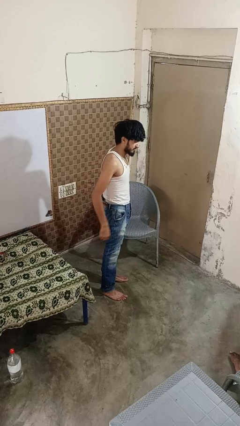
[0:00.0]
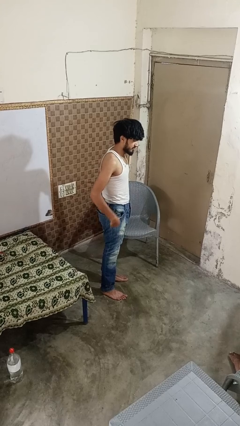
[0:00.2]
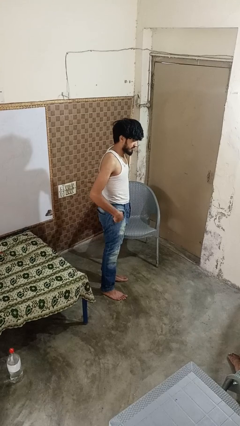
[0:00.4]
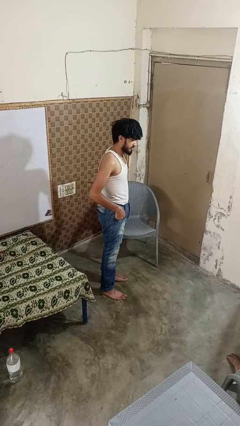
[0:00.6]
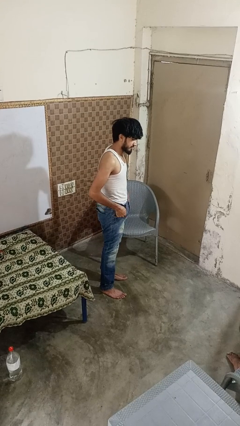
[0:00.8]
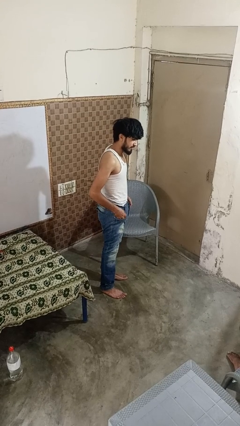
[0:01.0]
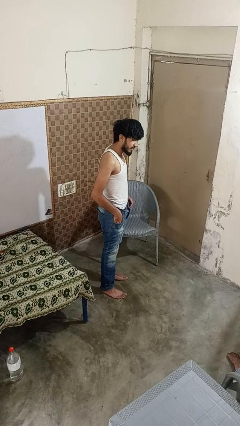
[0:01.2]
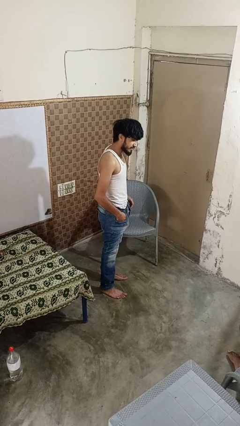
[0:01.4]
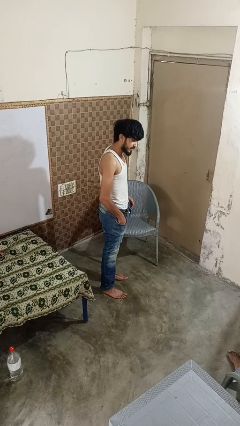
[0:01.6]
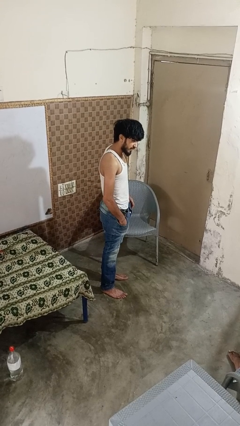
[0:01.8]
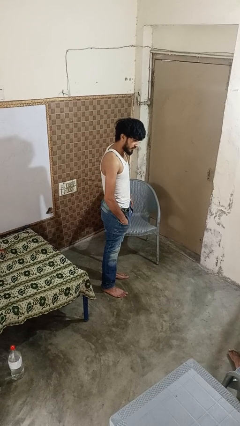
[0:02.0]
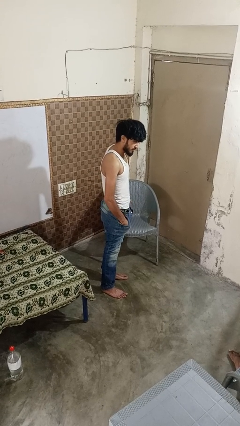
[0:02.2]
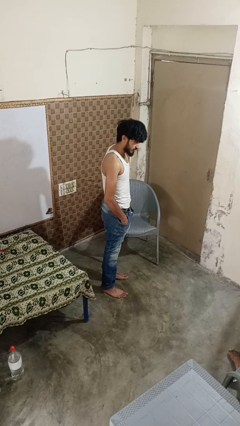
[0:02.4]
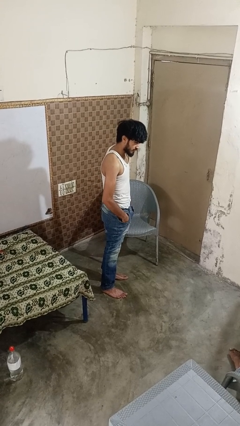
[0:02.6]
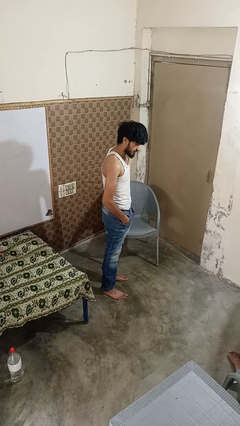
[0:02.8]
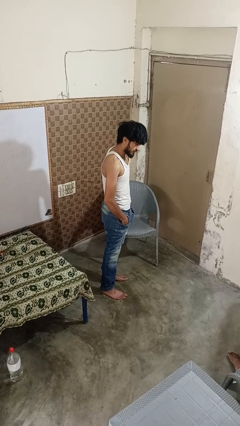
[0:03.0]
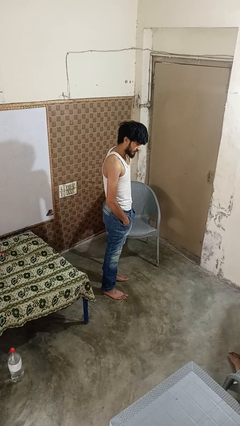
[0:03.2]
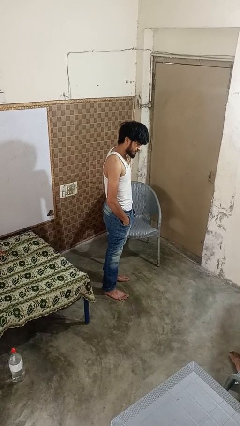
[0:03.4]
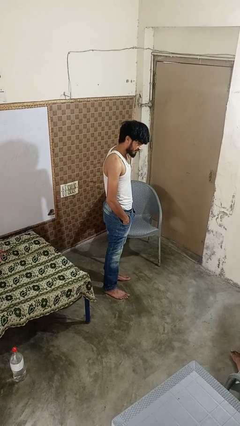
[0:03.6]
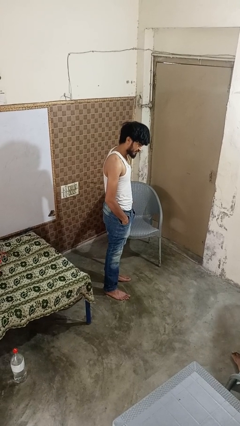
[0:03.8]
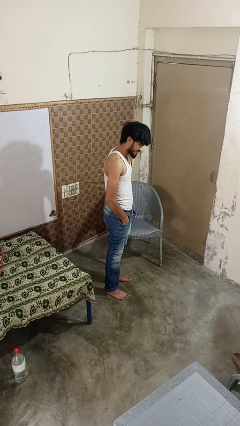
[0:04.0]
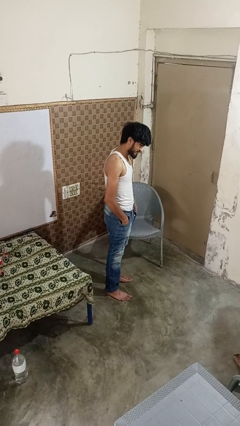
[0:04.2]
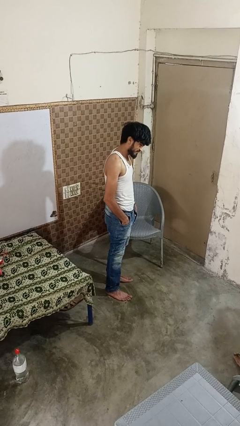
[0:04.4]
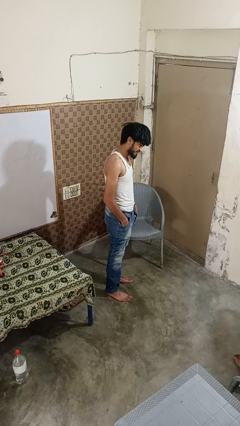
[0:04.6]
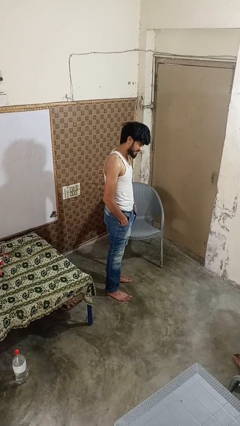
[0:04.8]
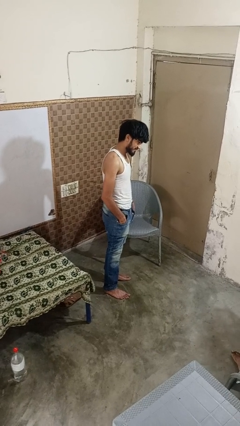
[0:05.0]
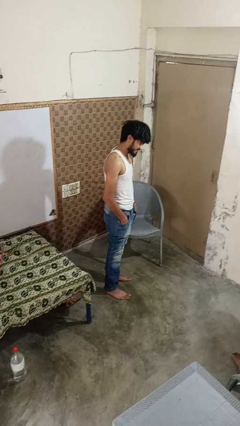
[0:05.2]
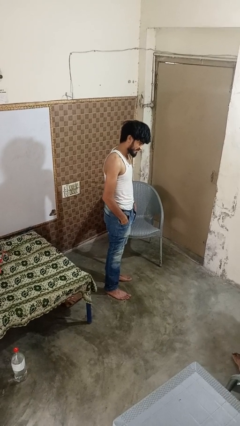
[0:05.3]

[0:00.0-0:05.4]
person puts hands in back pockets

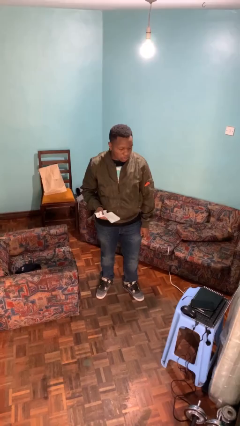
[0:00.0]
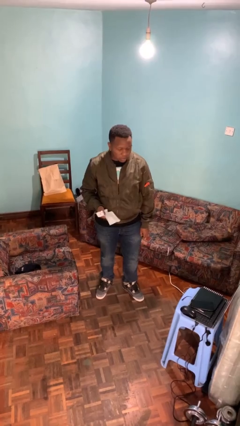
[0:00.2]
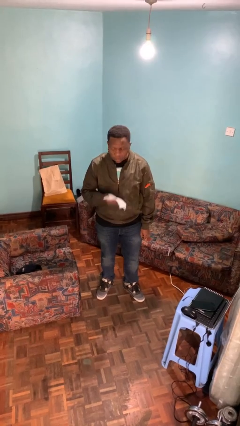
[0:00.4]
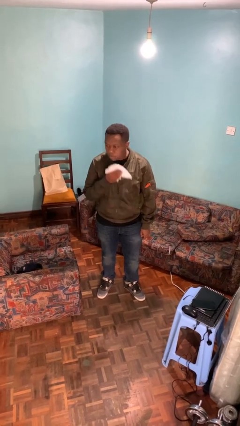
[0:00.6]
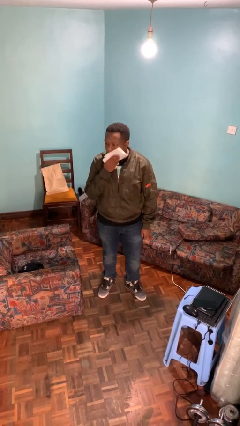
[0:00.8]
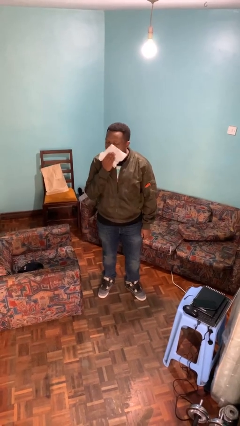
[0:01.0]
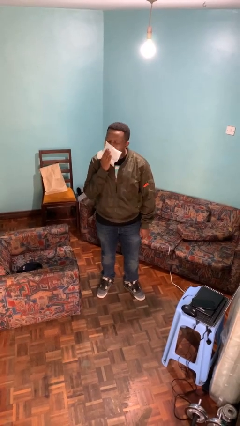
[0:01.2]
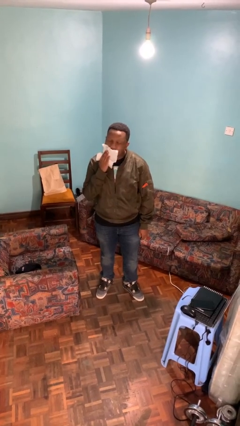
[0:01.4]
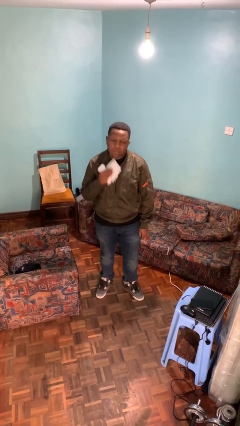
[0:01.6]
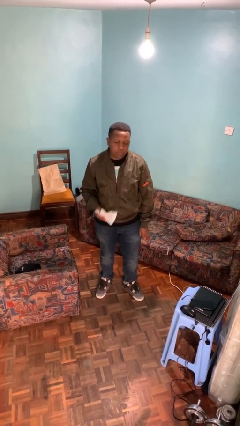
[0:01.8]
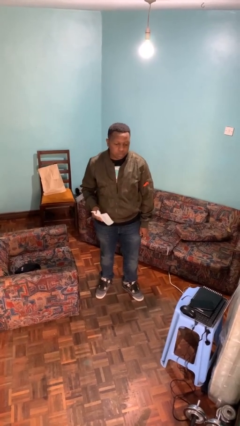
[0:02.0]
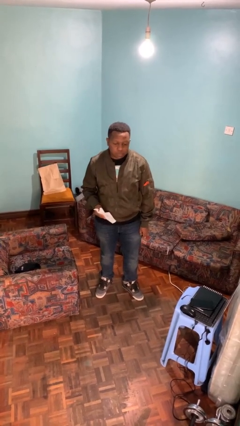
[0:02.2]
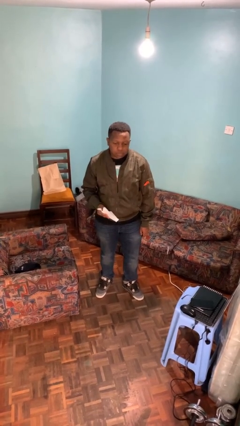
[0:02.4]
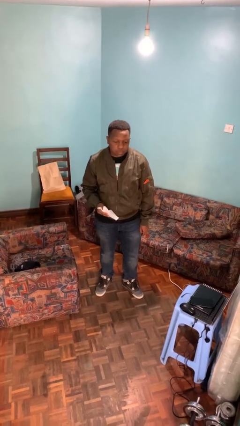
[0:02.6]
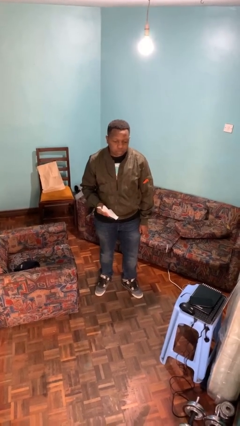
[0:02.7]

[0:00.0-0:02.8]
person wipes mouth with napkin

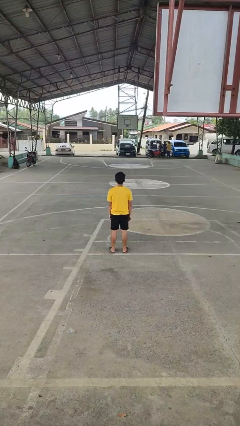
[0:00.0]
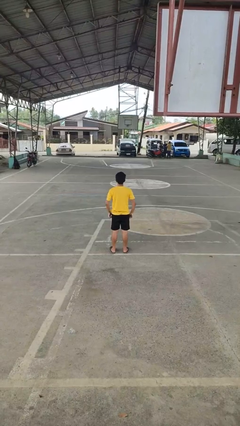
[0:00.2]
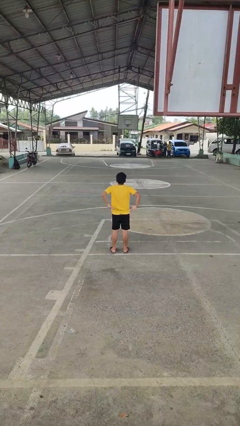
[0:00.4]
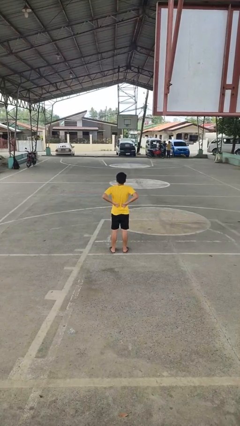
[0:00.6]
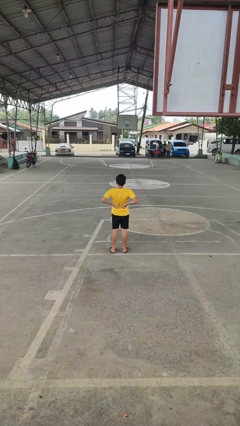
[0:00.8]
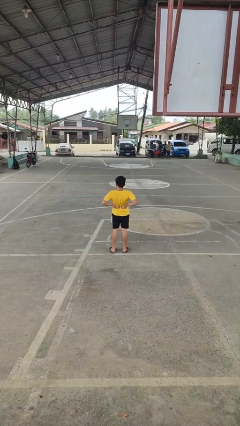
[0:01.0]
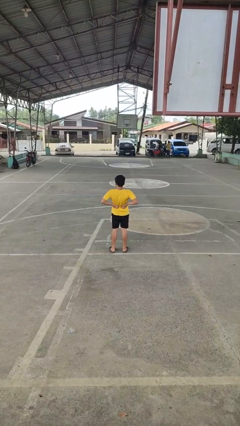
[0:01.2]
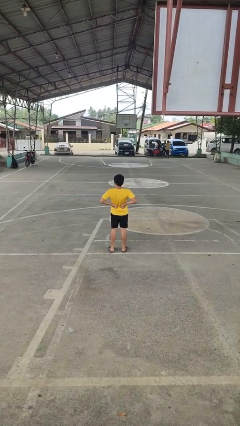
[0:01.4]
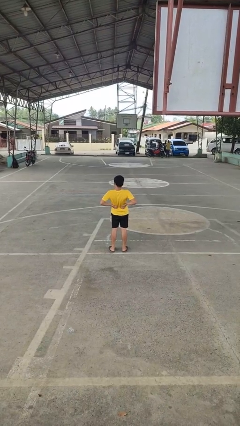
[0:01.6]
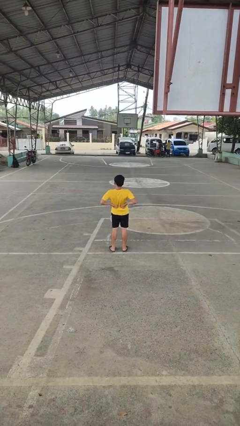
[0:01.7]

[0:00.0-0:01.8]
person stretches back

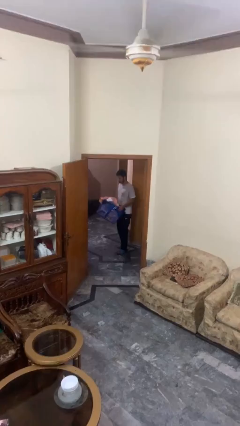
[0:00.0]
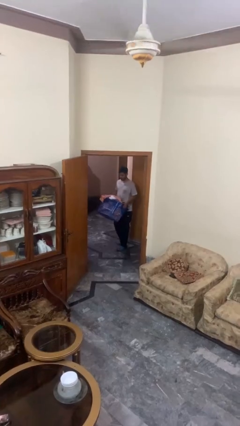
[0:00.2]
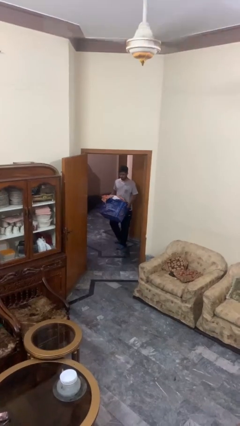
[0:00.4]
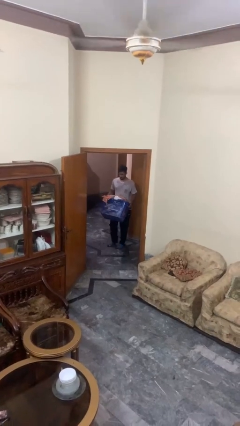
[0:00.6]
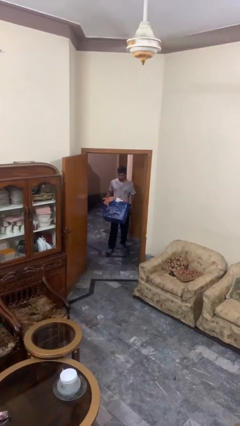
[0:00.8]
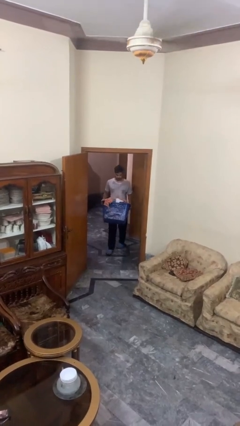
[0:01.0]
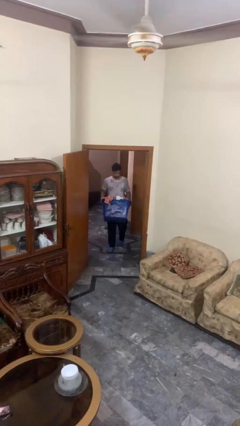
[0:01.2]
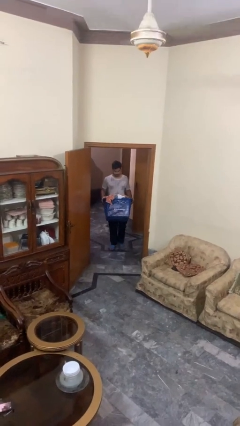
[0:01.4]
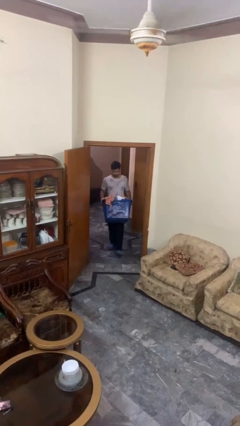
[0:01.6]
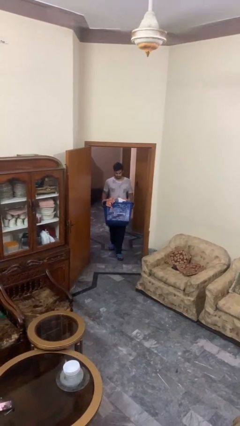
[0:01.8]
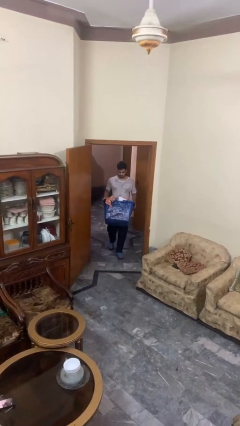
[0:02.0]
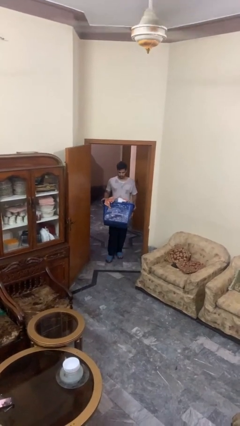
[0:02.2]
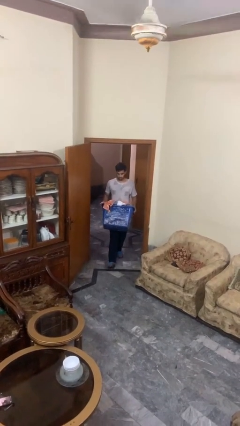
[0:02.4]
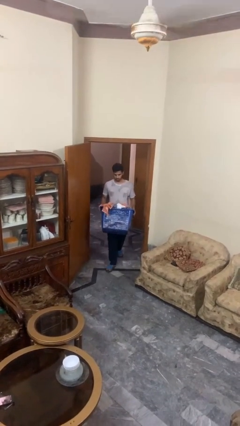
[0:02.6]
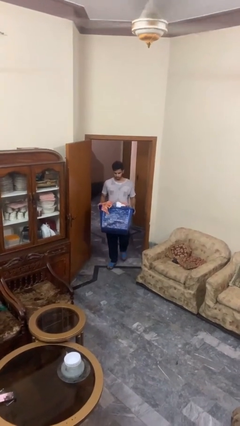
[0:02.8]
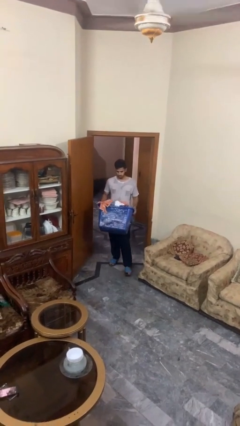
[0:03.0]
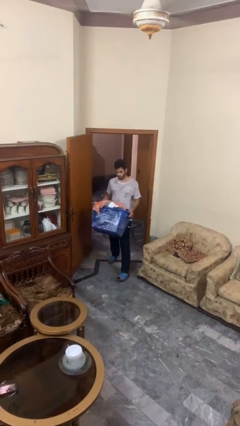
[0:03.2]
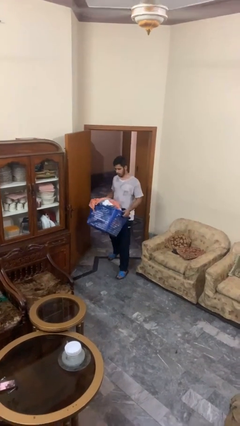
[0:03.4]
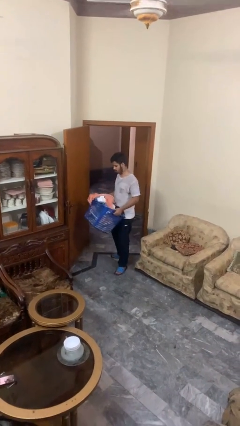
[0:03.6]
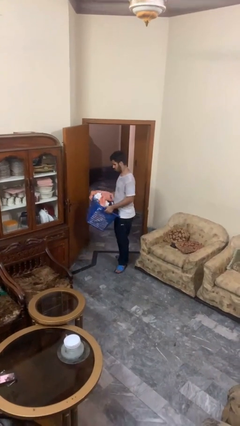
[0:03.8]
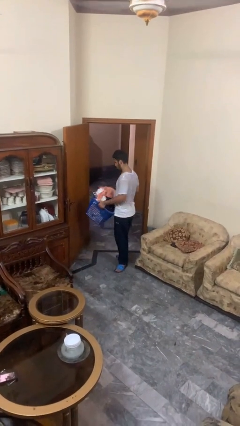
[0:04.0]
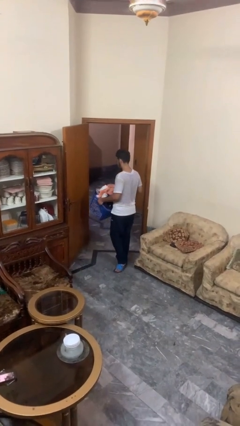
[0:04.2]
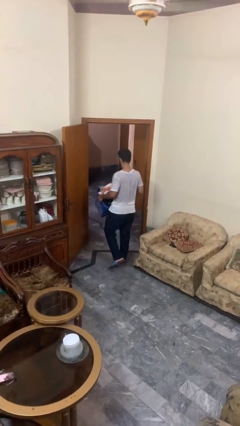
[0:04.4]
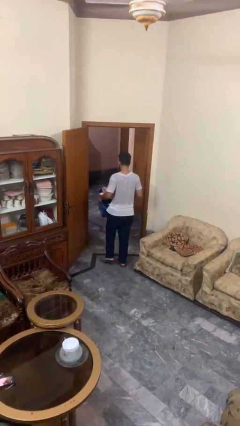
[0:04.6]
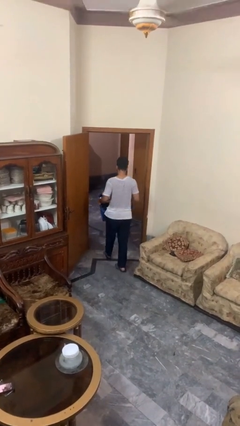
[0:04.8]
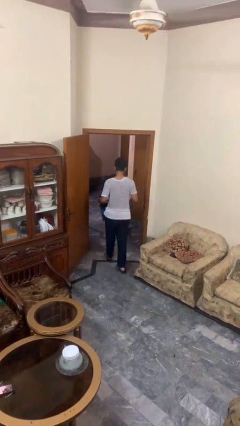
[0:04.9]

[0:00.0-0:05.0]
person carries laundry basket

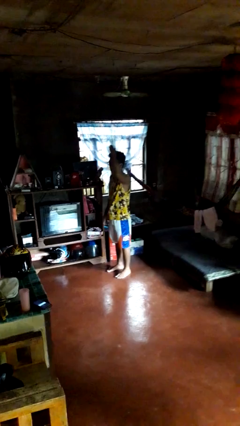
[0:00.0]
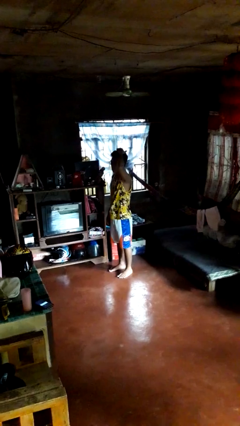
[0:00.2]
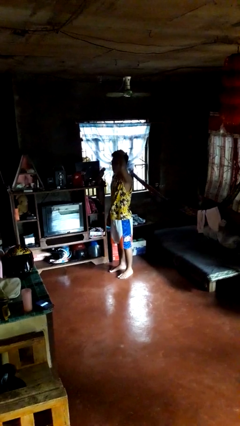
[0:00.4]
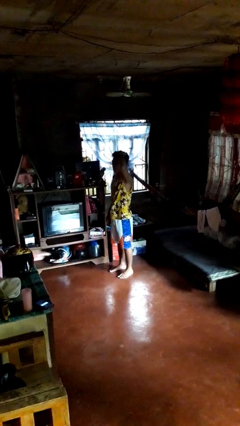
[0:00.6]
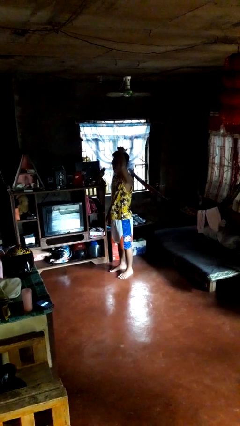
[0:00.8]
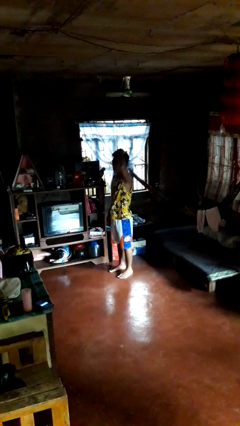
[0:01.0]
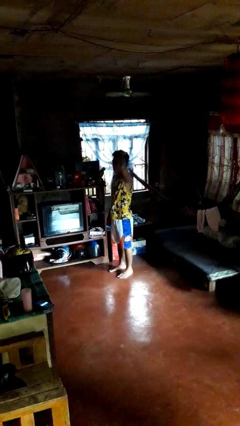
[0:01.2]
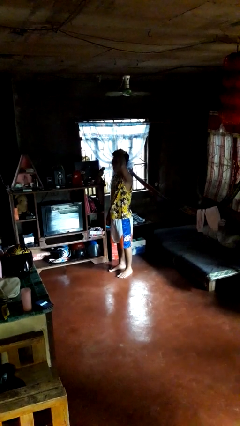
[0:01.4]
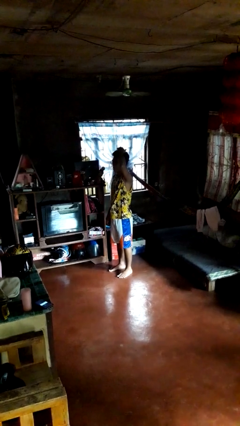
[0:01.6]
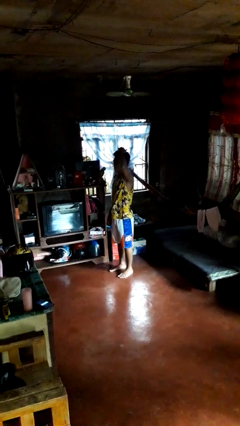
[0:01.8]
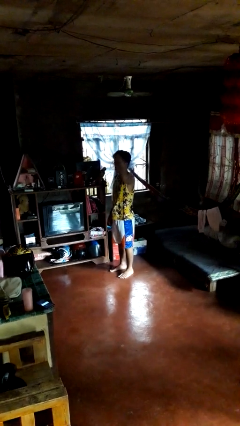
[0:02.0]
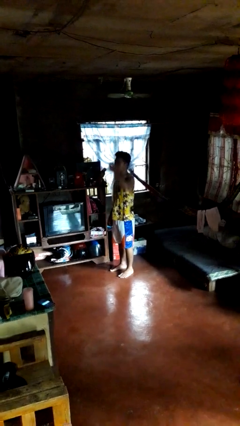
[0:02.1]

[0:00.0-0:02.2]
person pats head

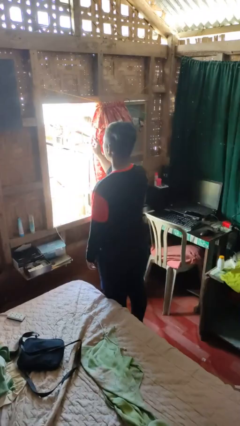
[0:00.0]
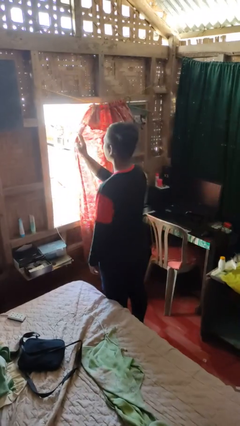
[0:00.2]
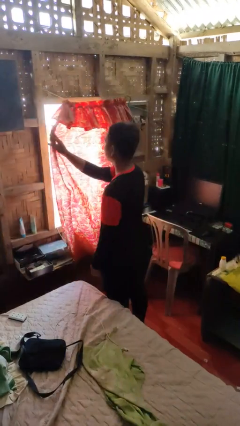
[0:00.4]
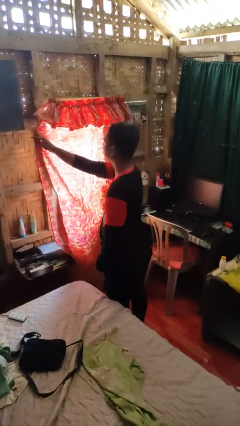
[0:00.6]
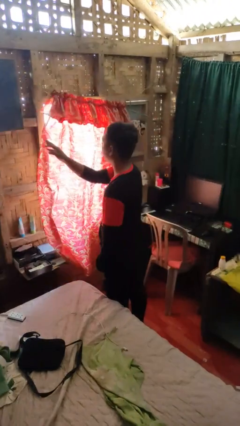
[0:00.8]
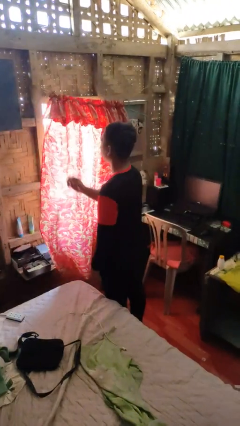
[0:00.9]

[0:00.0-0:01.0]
person closes curtains
